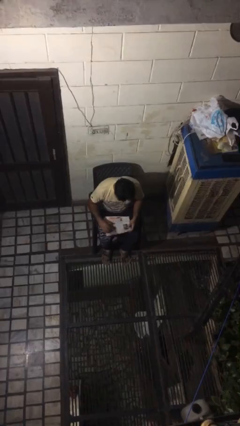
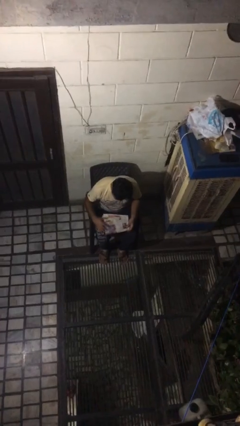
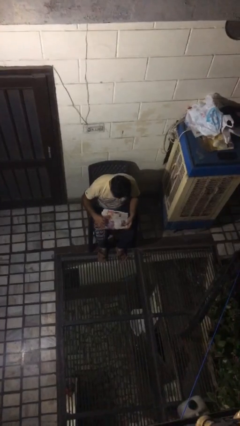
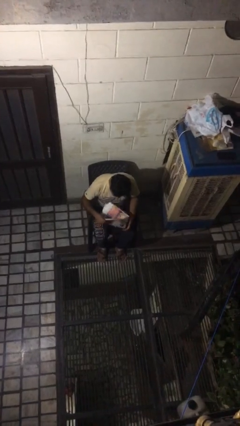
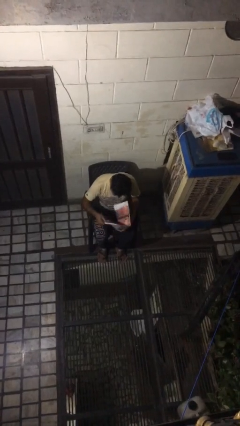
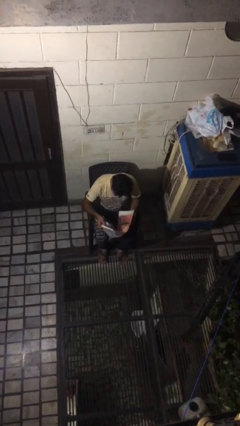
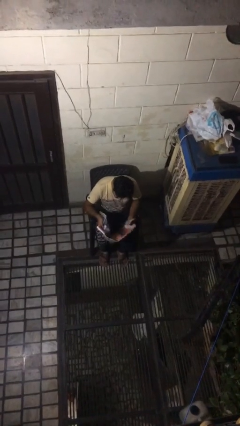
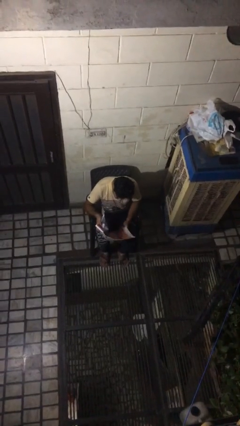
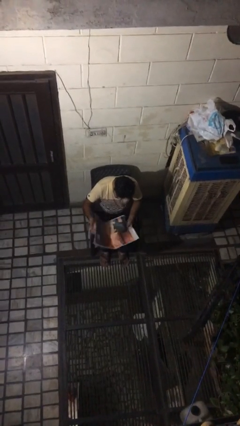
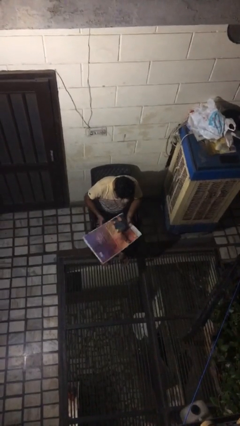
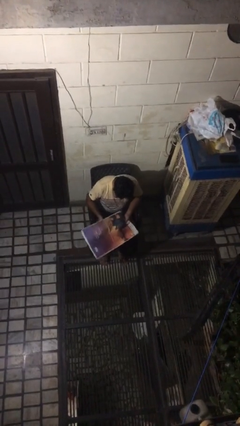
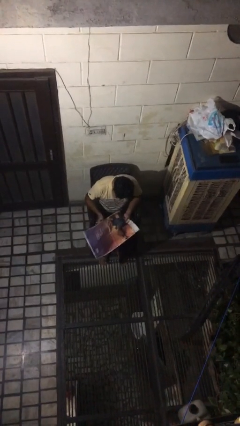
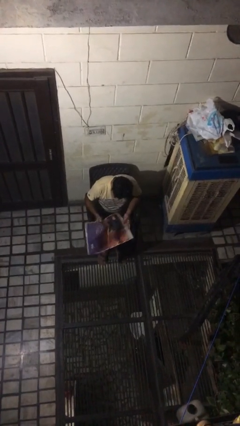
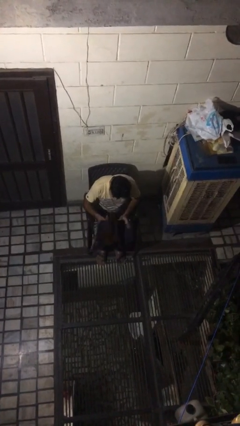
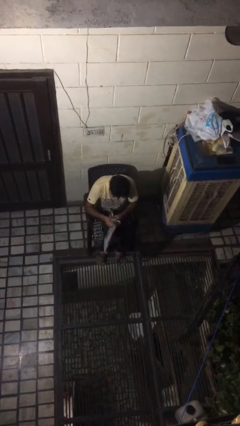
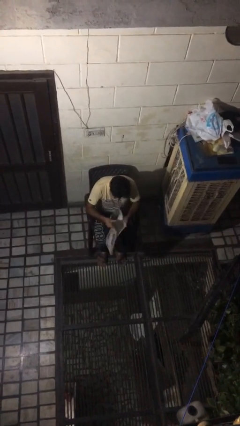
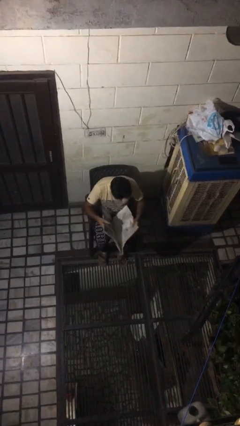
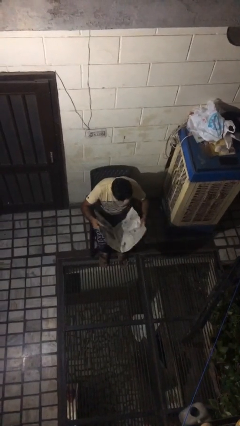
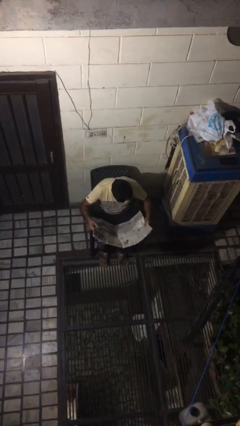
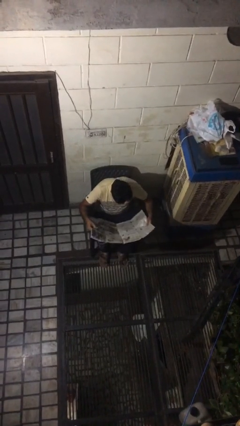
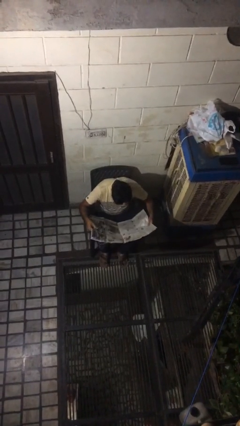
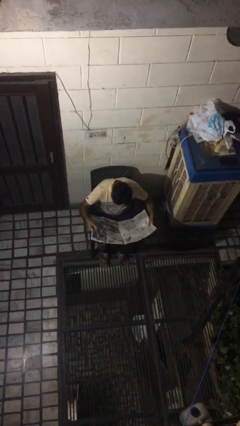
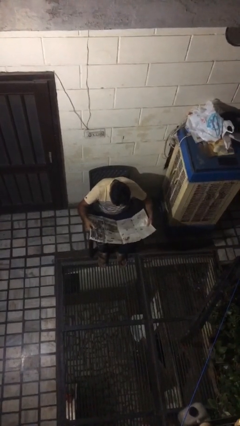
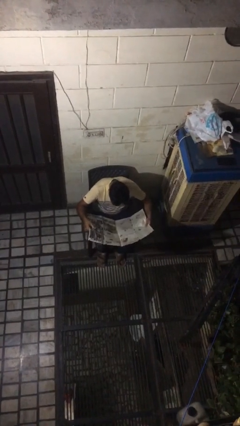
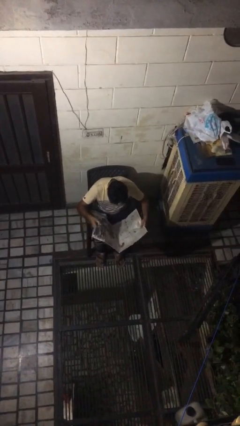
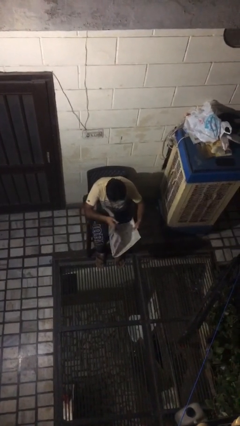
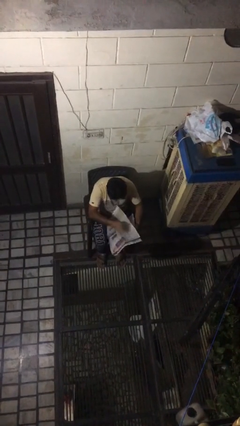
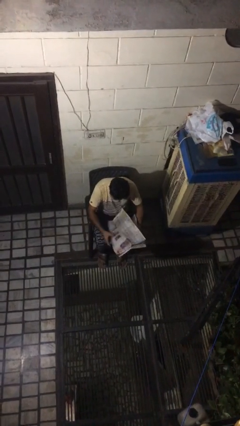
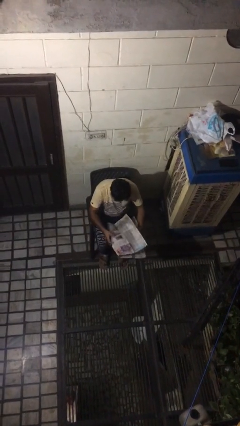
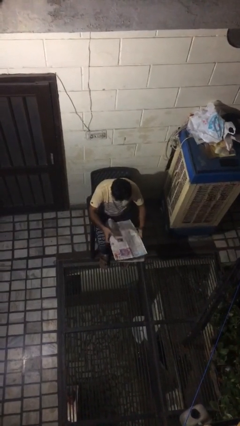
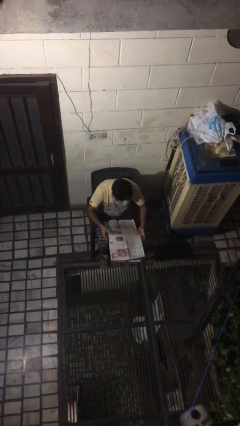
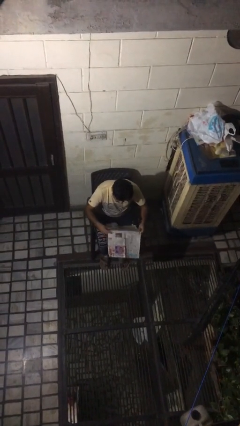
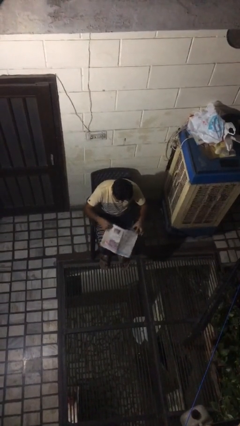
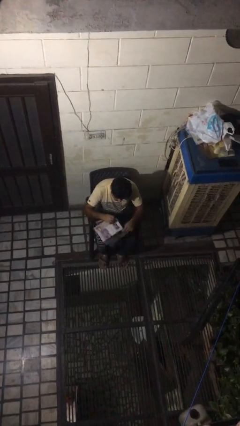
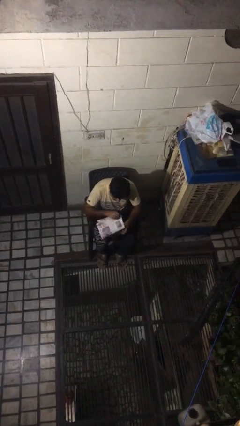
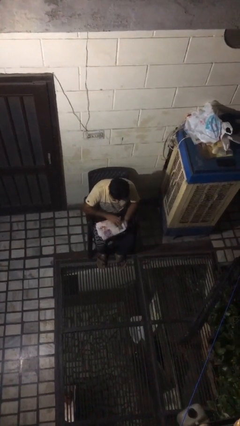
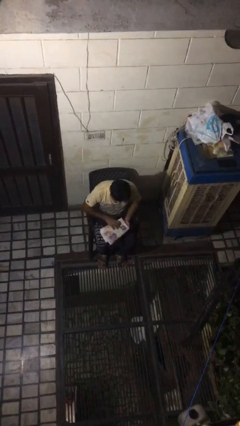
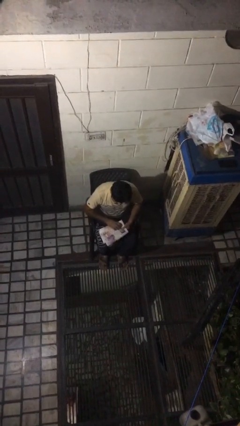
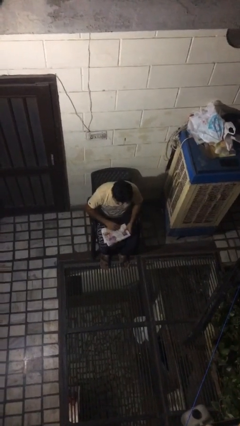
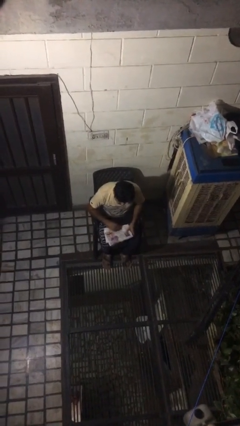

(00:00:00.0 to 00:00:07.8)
person reads newspaper

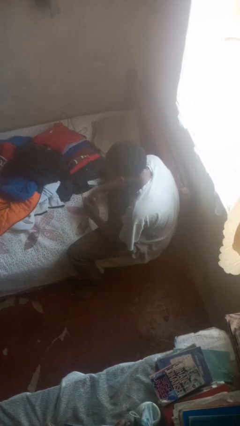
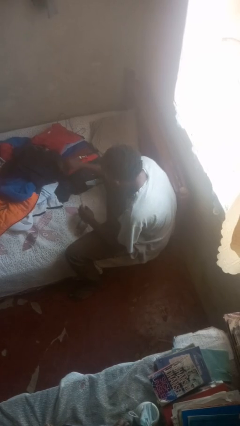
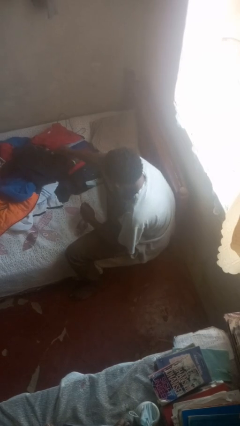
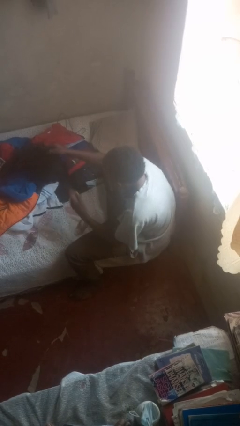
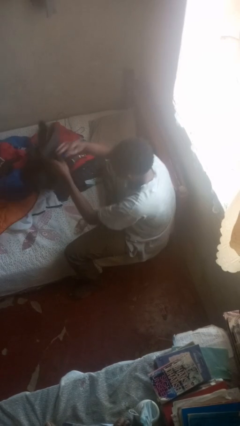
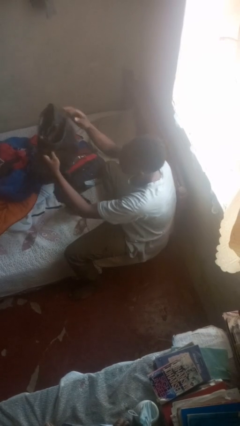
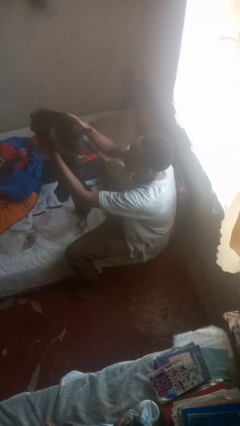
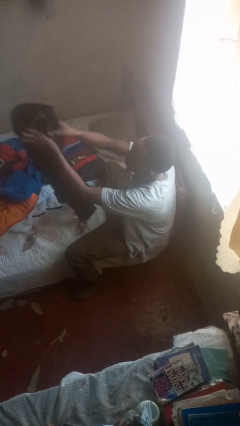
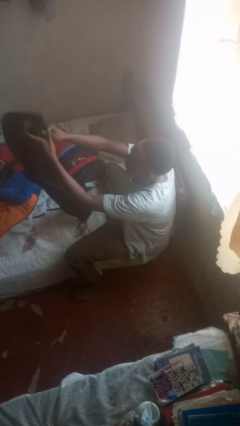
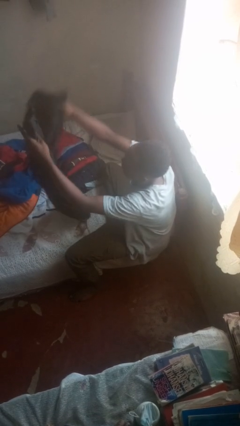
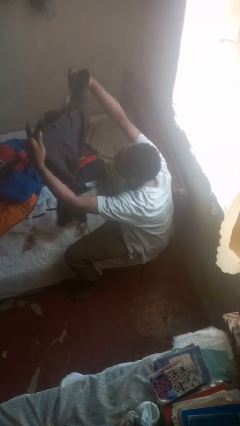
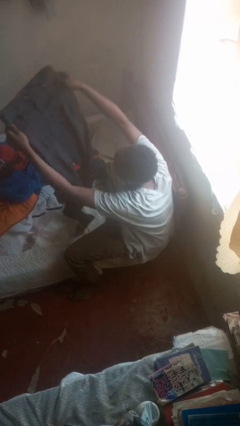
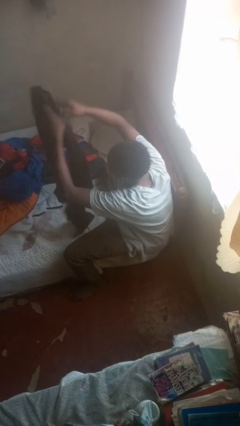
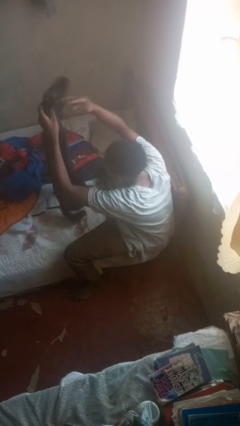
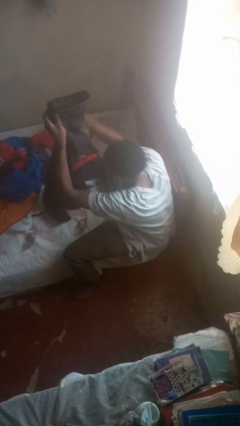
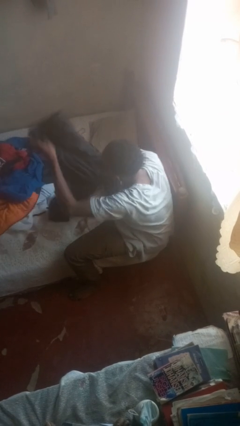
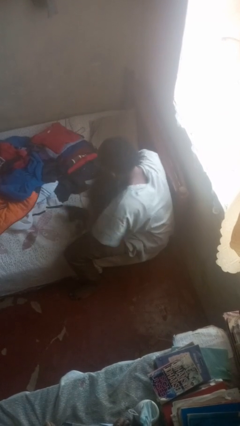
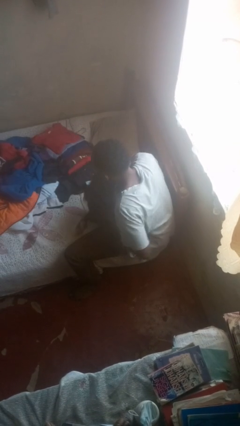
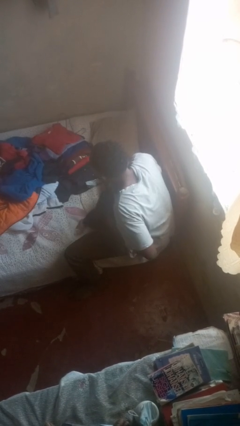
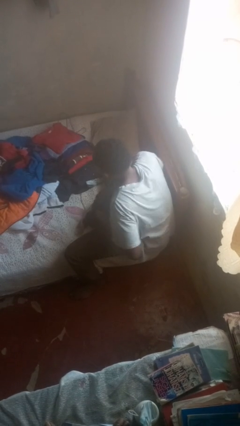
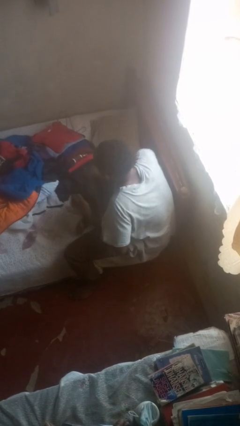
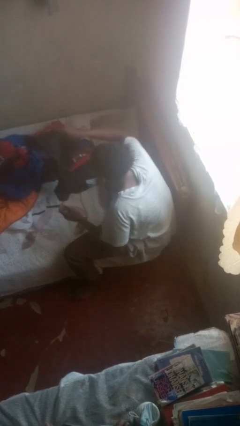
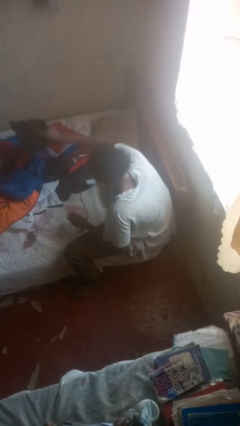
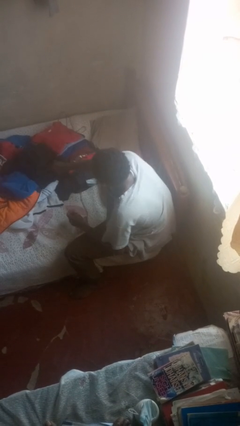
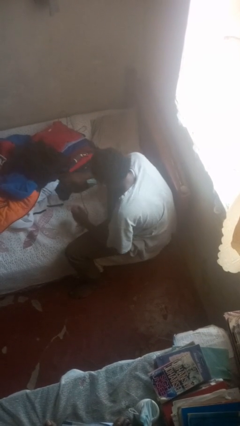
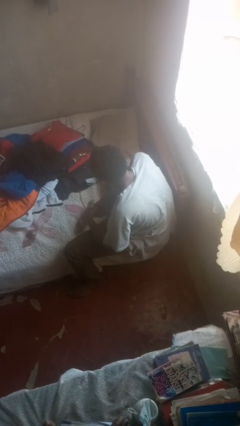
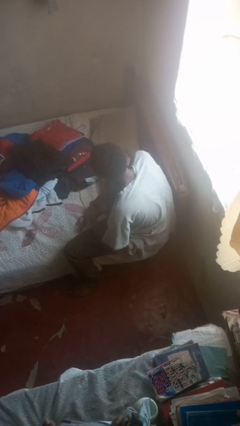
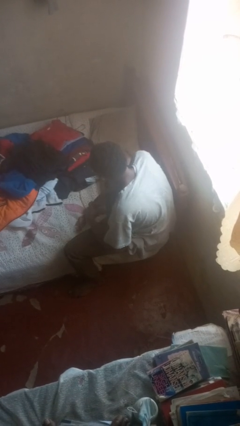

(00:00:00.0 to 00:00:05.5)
person folds pants

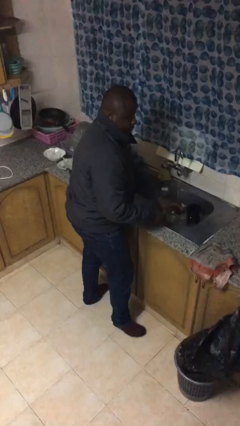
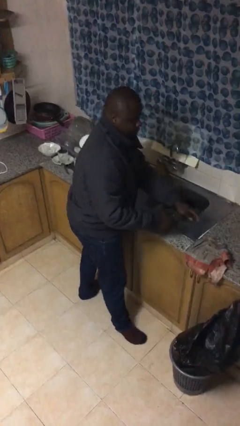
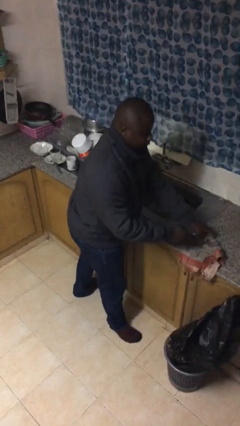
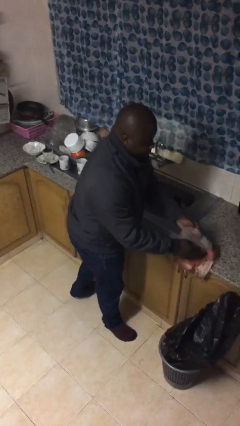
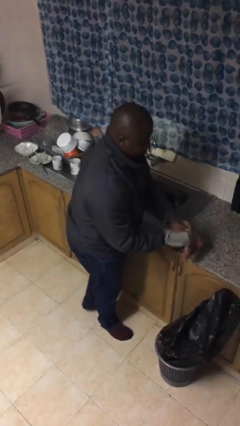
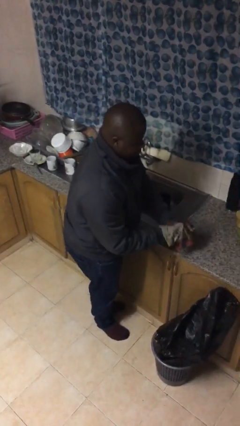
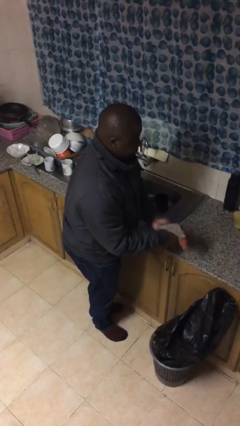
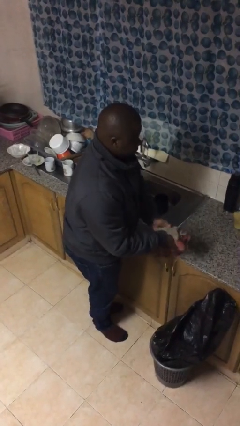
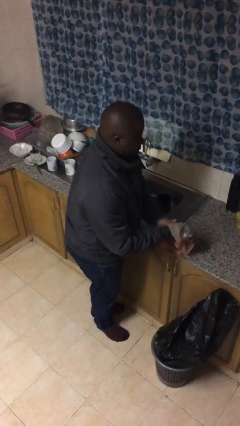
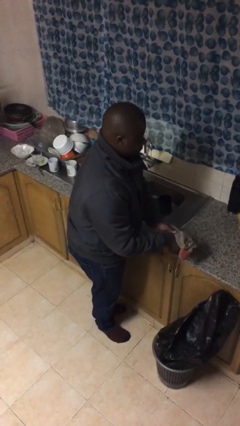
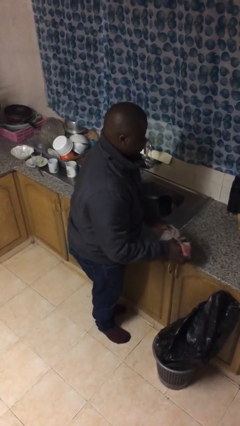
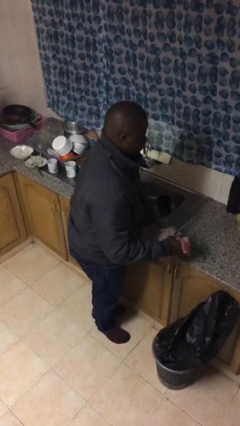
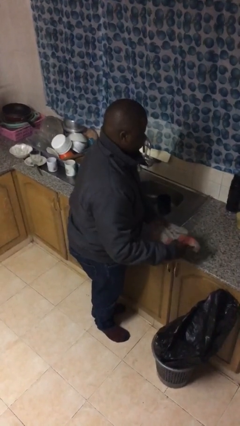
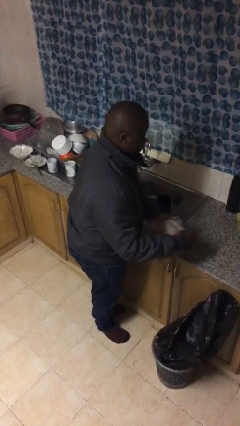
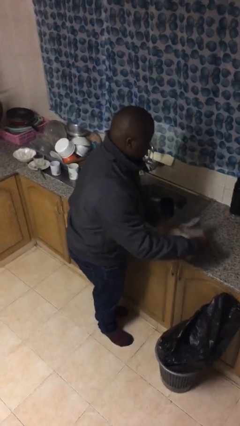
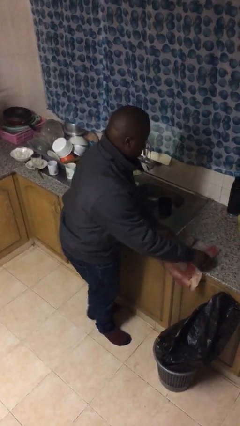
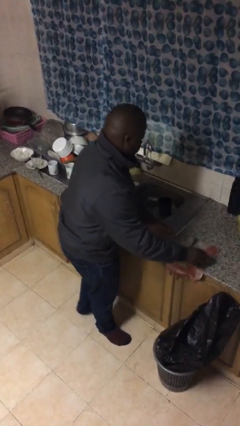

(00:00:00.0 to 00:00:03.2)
person dries hands with towel

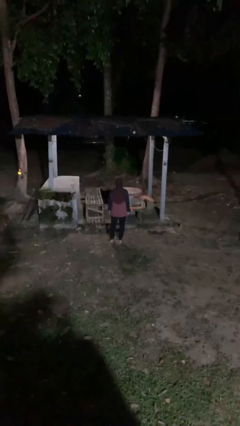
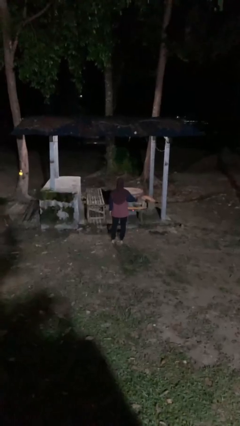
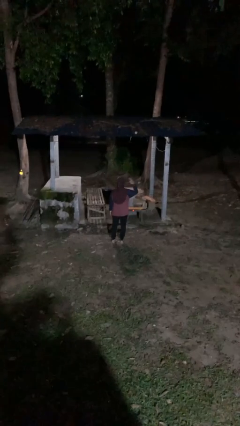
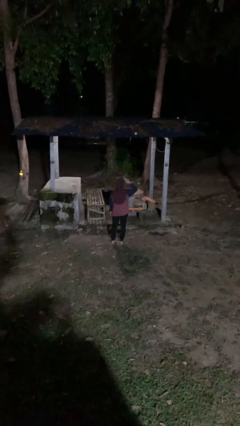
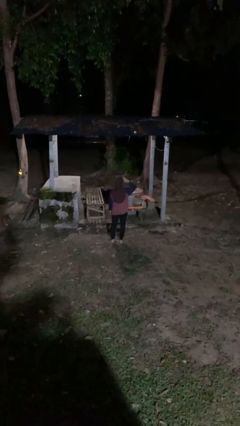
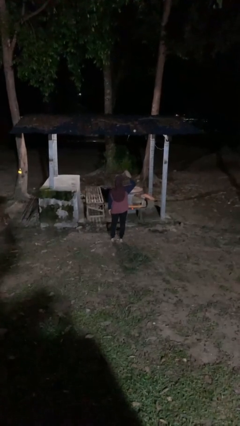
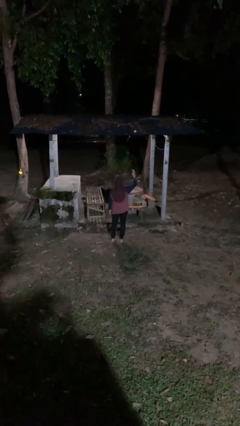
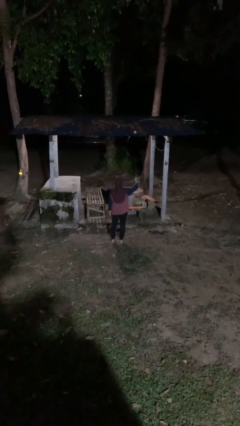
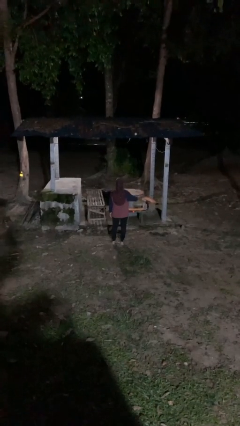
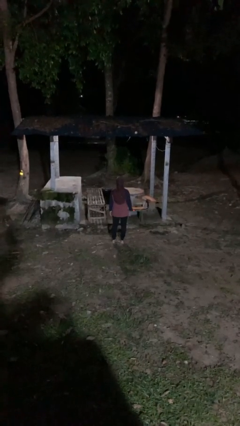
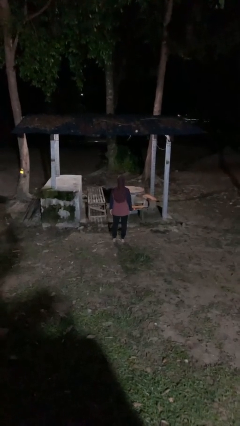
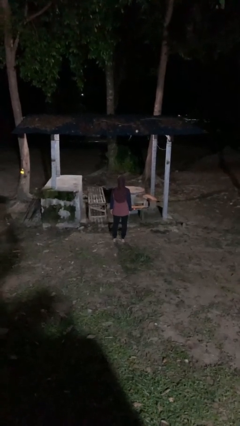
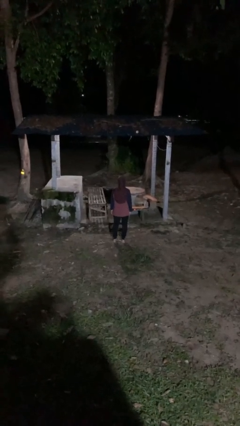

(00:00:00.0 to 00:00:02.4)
person salutes
